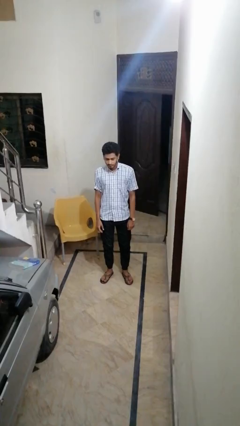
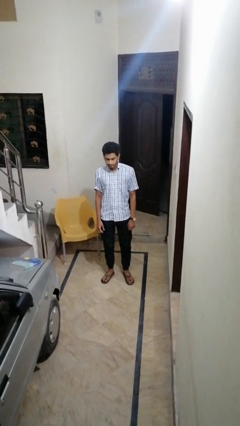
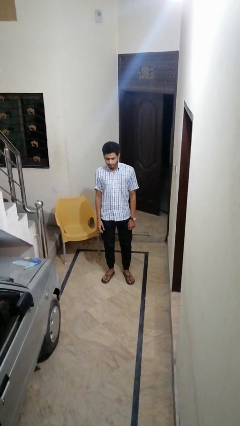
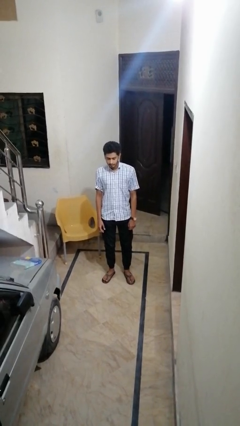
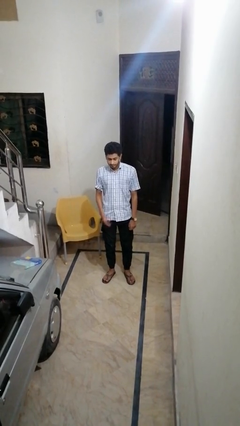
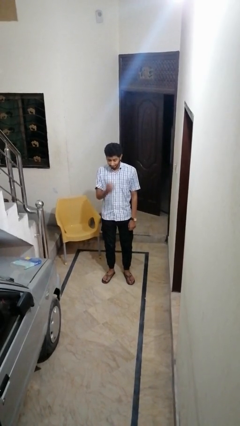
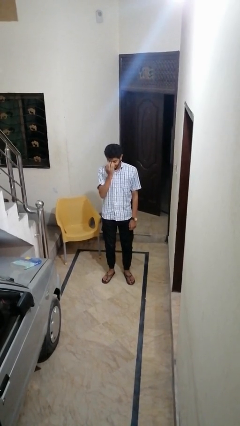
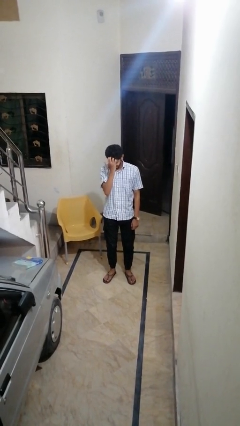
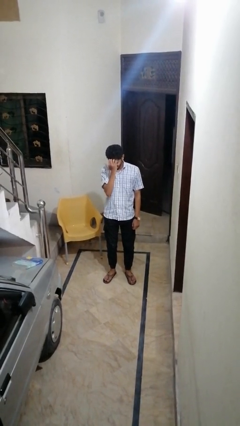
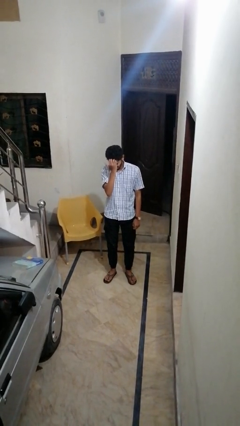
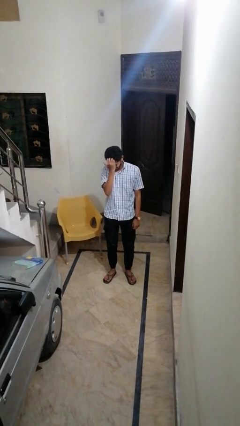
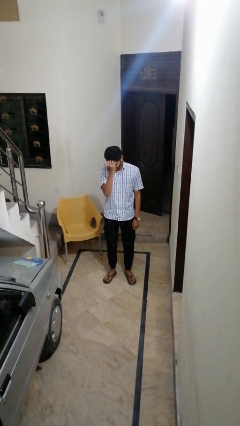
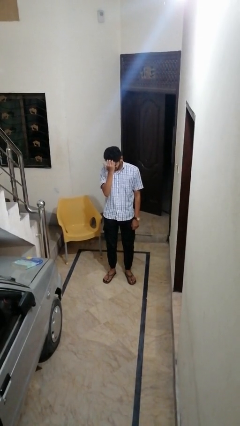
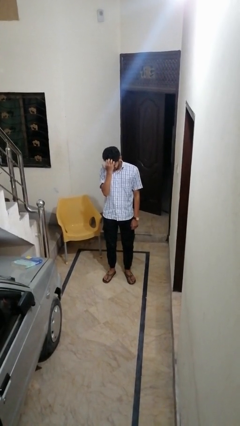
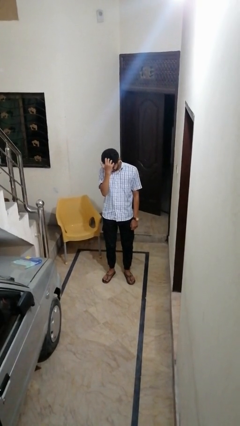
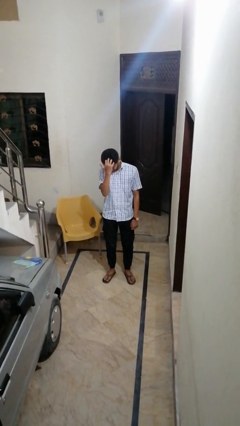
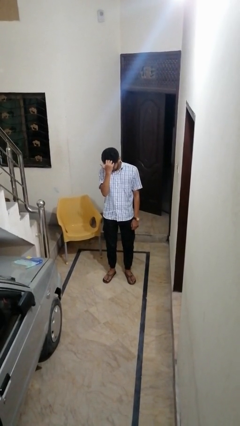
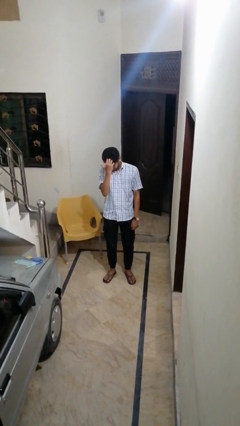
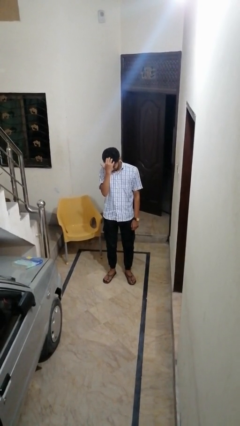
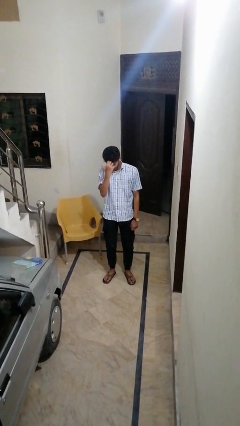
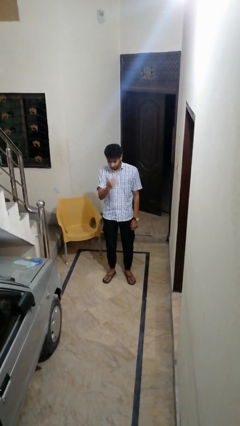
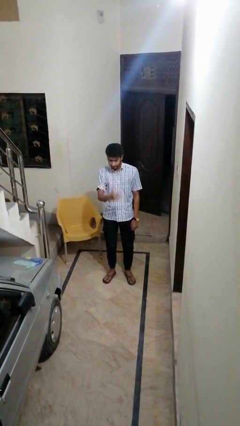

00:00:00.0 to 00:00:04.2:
person scratches face

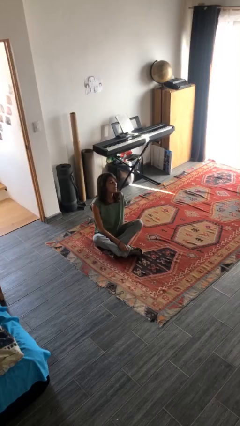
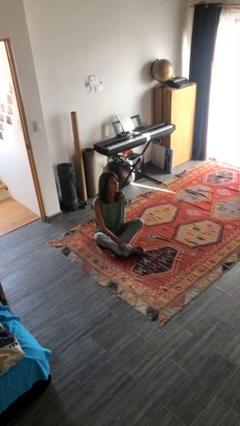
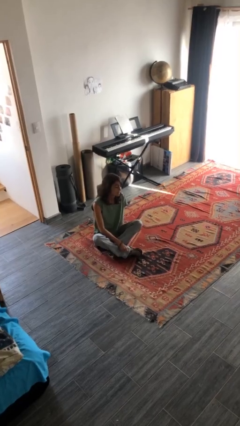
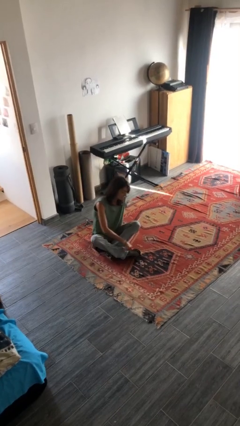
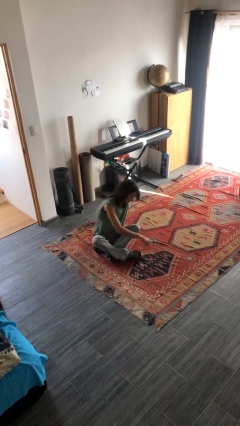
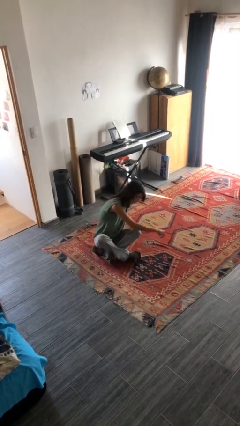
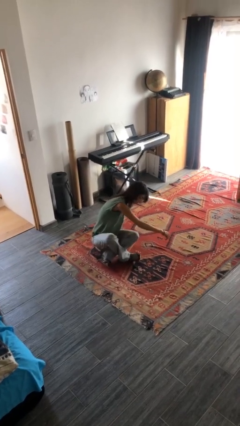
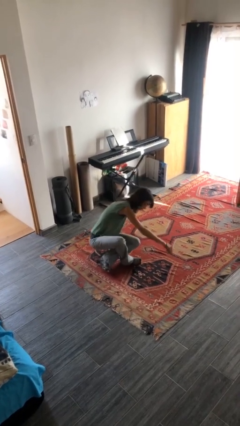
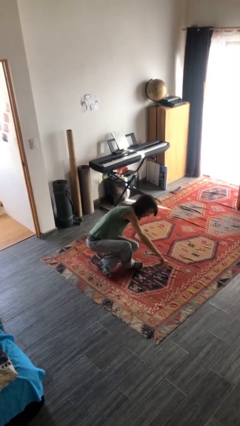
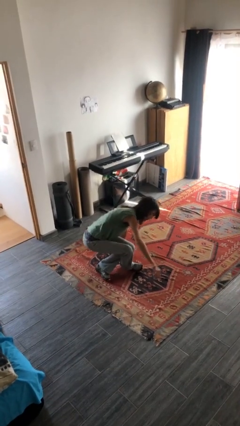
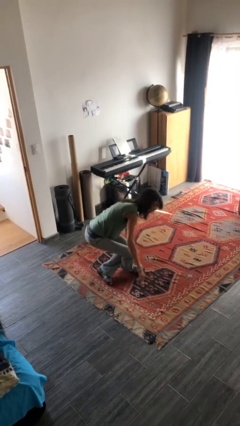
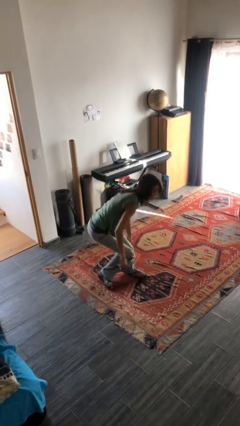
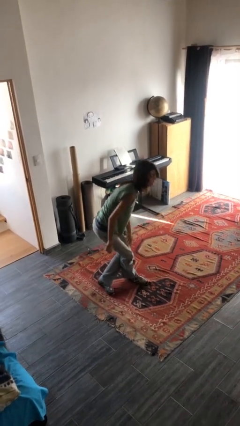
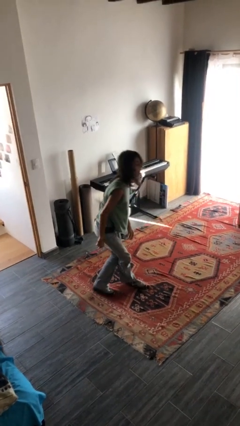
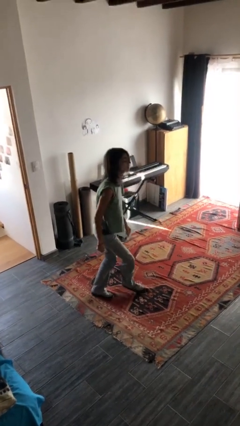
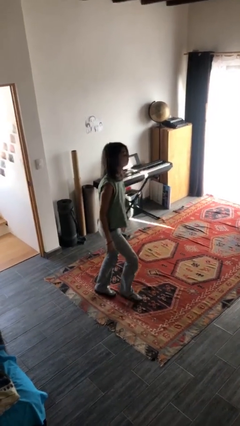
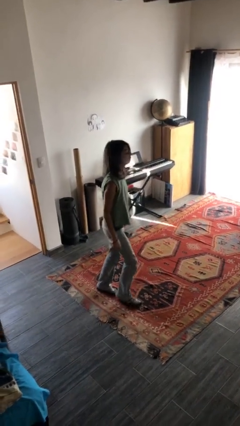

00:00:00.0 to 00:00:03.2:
person stands up from floor

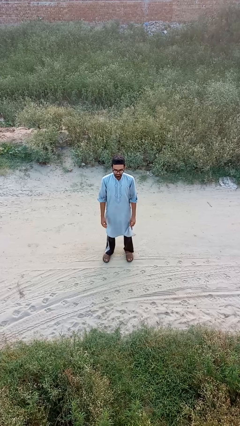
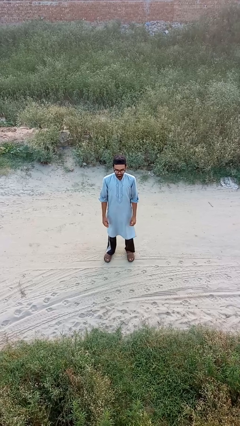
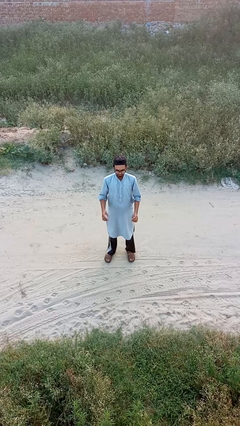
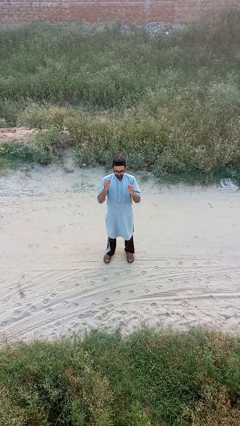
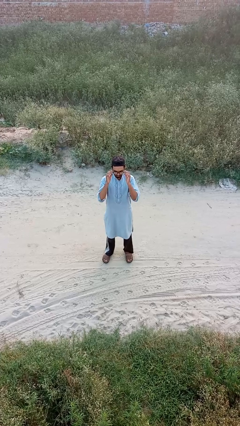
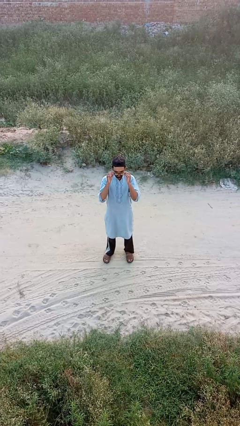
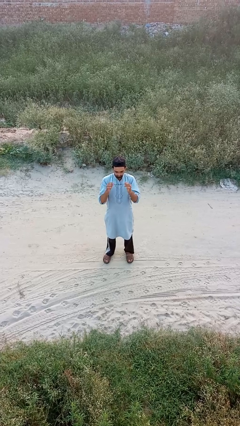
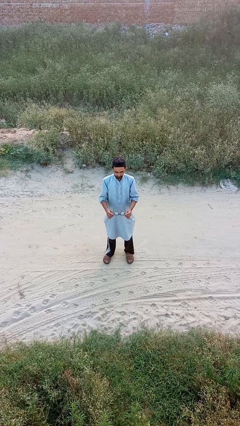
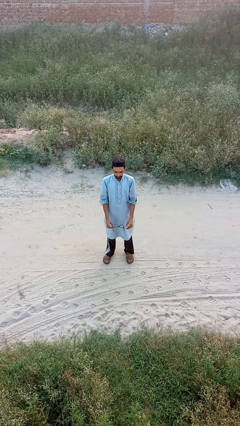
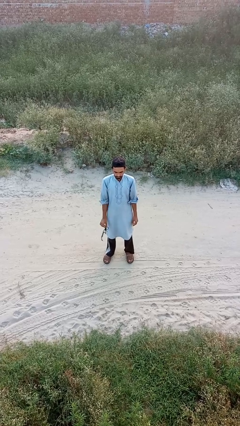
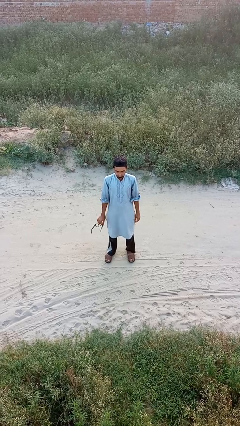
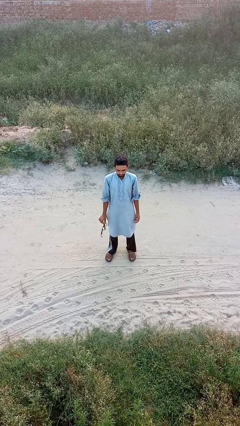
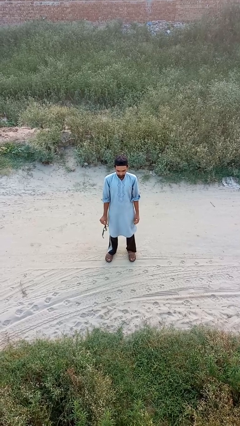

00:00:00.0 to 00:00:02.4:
person takes off glasses

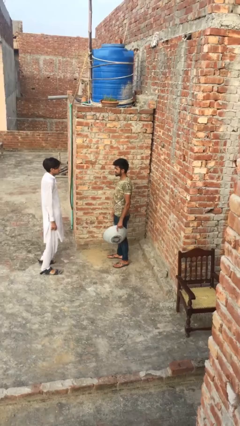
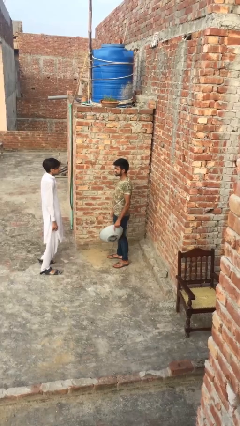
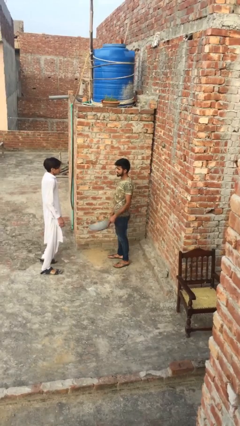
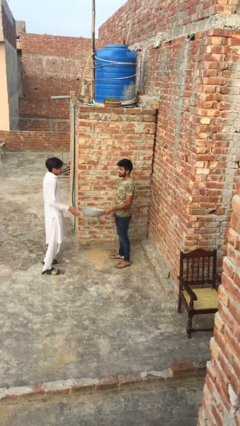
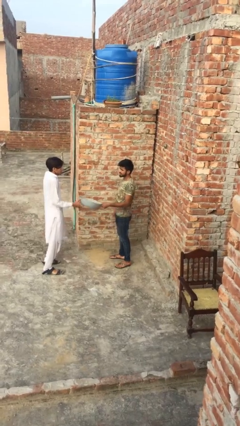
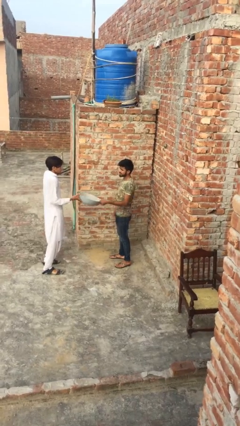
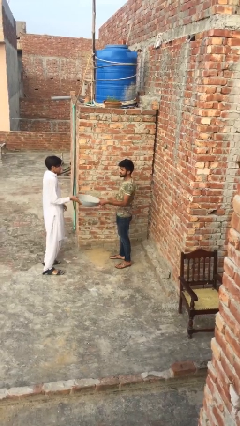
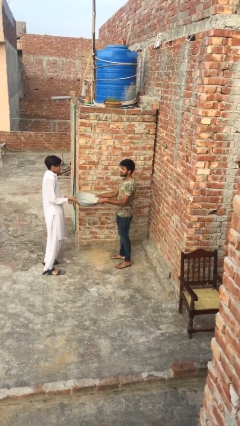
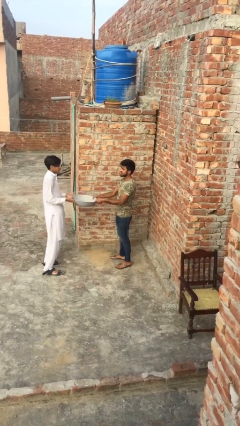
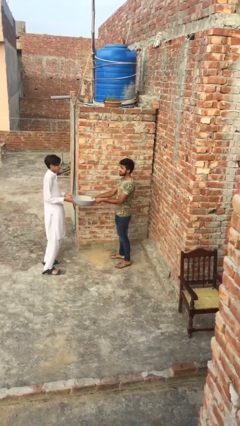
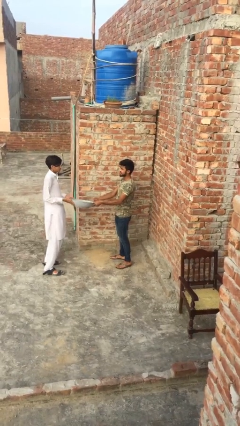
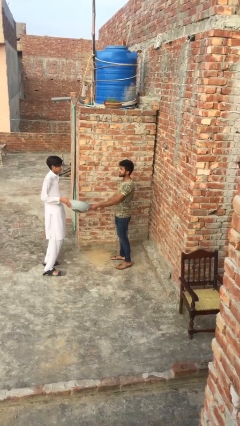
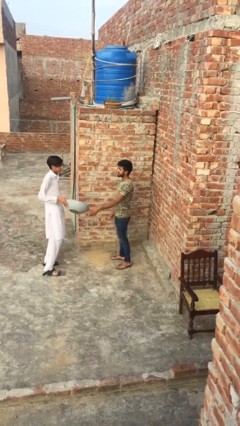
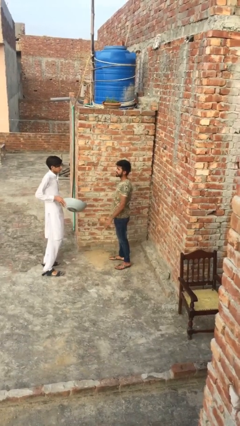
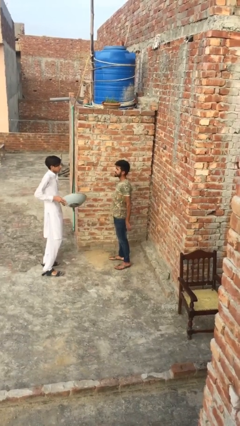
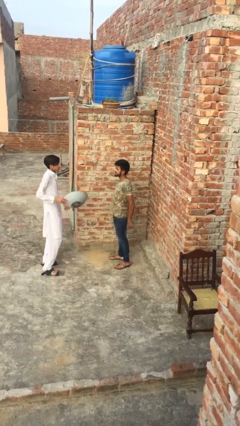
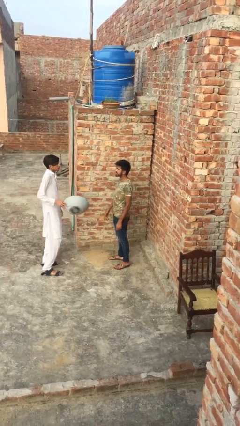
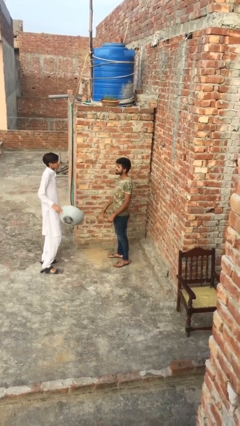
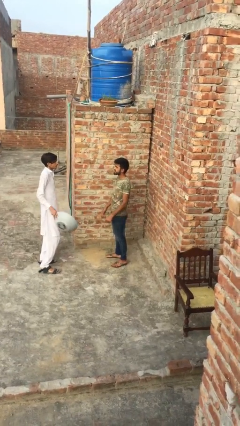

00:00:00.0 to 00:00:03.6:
person transfers object to person

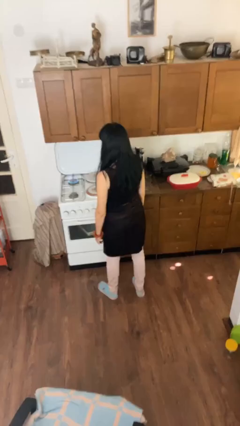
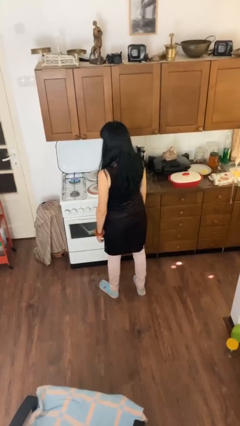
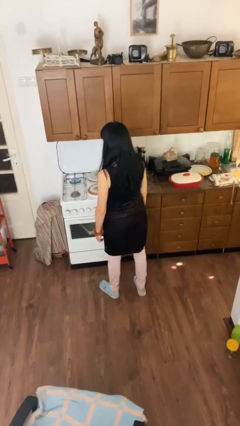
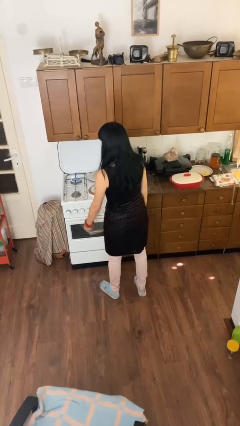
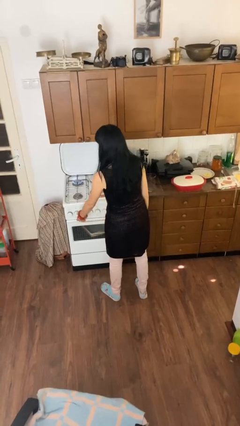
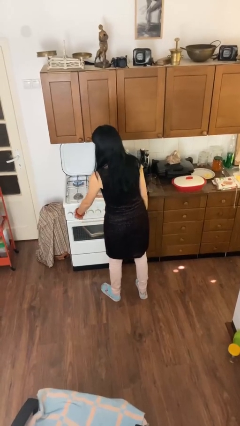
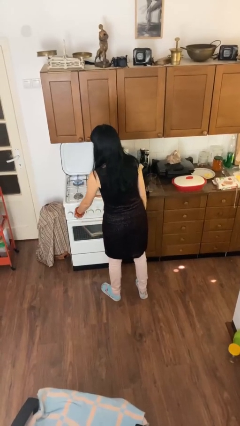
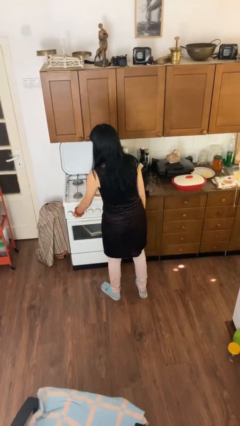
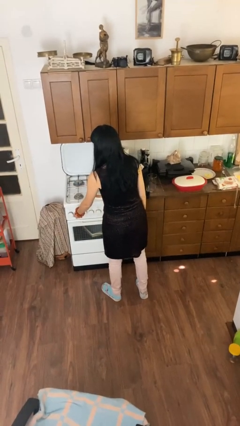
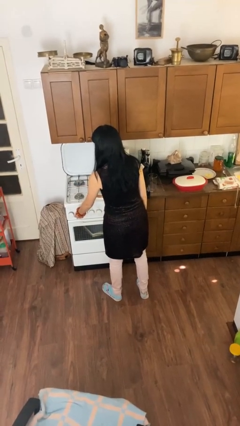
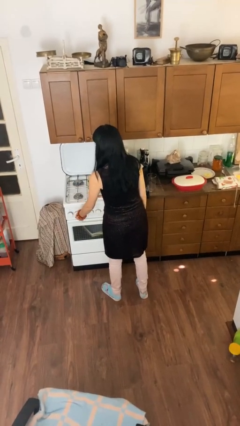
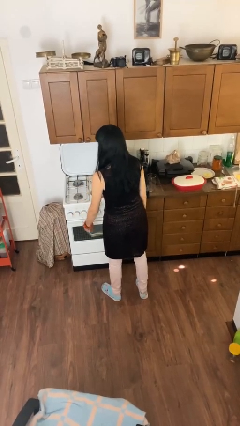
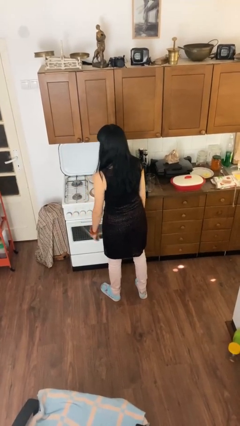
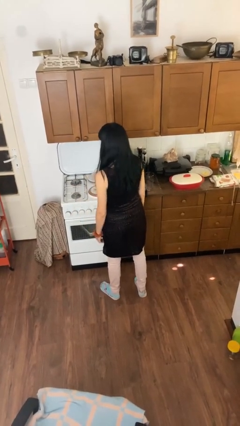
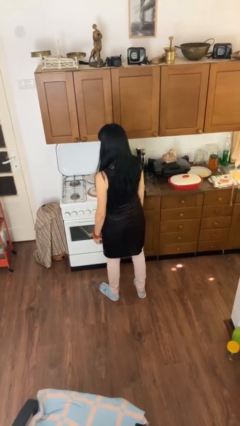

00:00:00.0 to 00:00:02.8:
person turns off stovetop

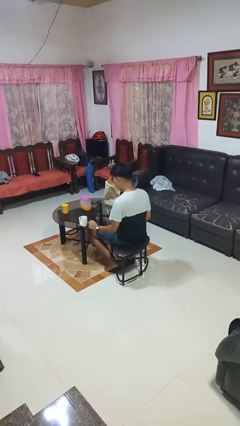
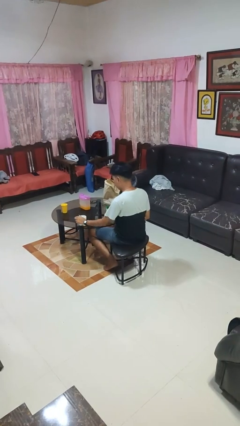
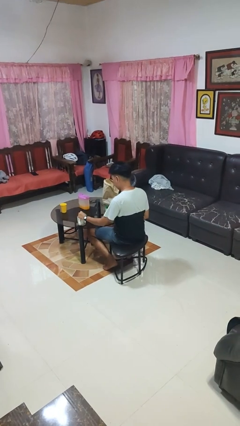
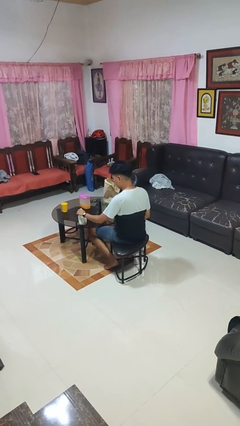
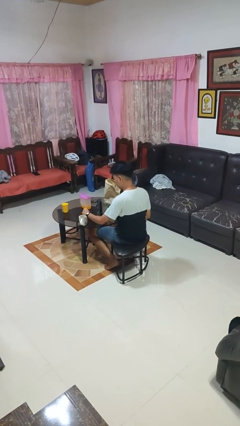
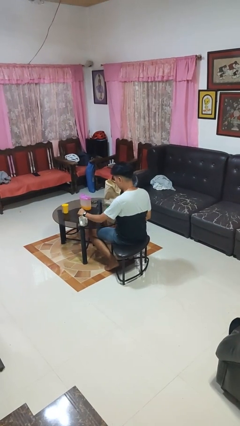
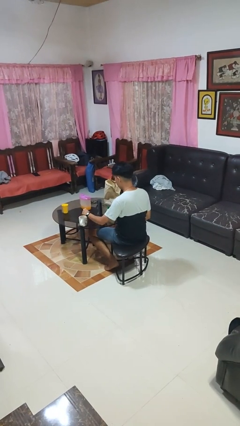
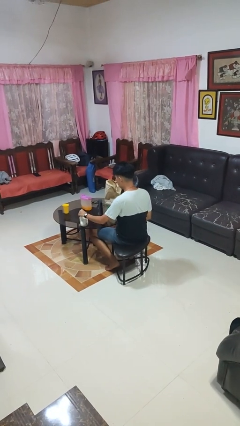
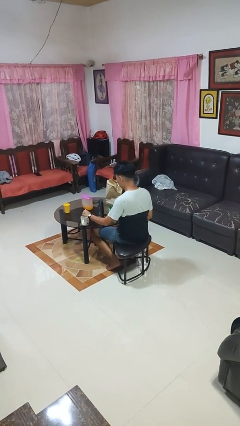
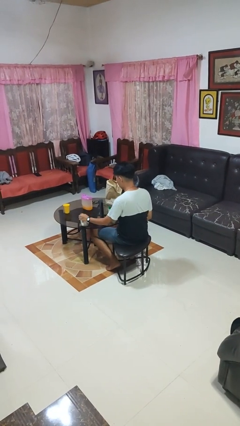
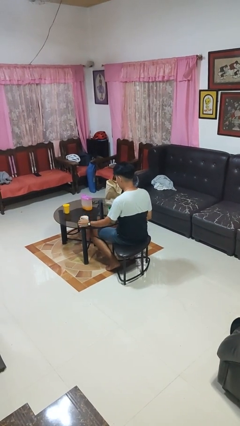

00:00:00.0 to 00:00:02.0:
person stirs mug
